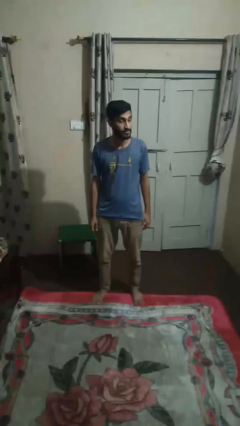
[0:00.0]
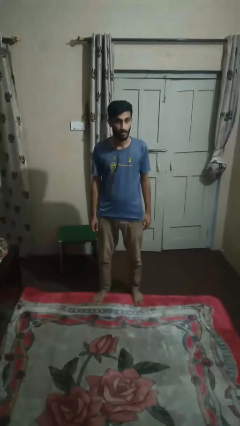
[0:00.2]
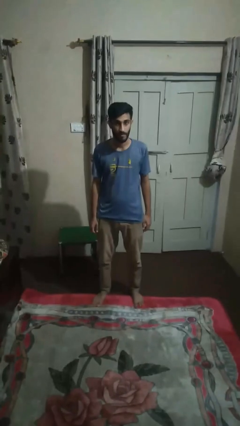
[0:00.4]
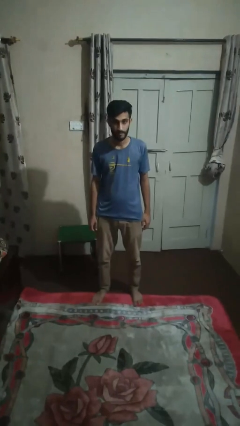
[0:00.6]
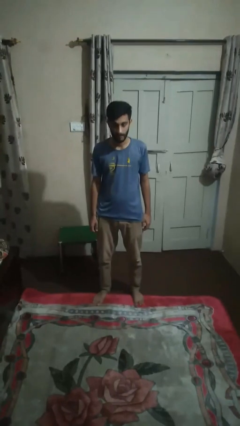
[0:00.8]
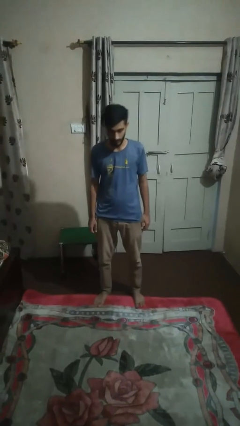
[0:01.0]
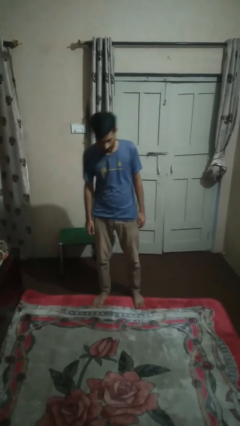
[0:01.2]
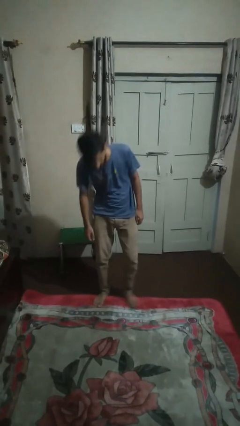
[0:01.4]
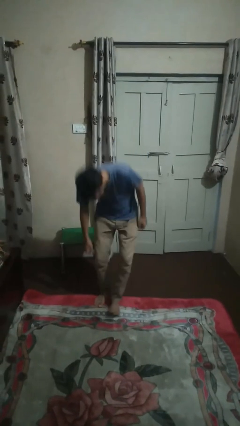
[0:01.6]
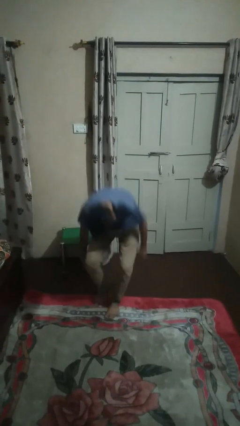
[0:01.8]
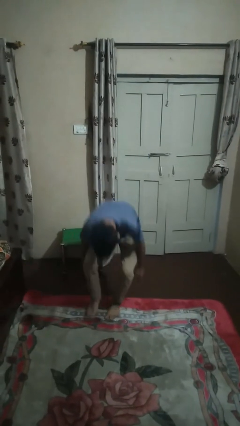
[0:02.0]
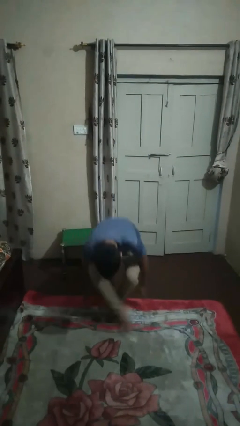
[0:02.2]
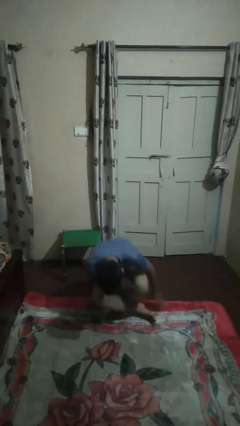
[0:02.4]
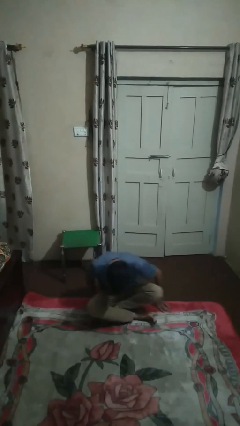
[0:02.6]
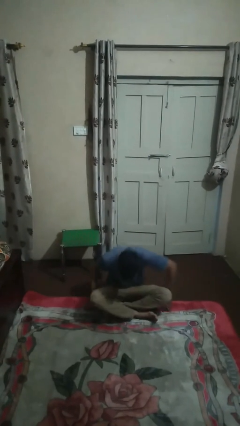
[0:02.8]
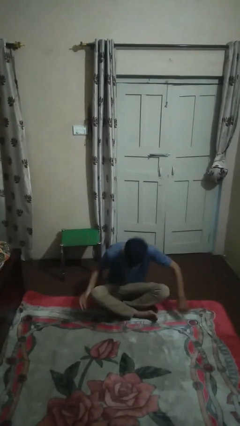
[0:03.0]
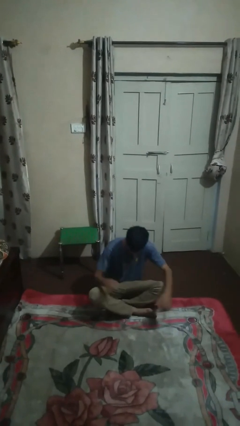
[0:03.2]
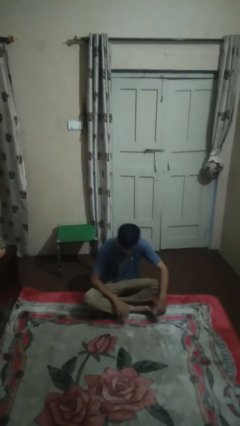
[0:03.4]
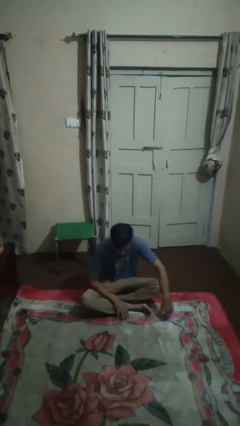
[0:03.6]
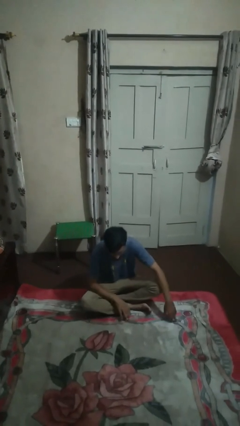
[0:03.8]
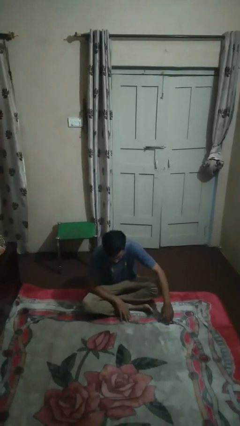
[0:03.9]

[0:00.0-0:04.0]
person sits crisscross

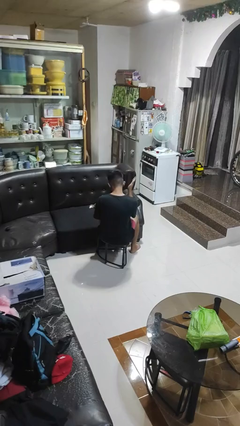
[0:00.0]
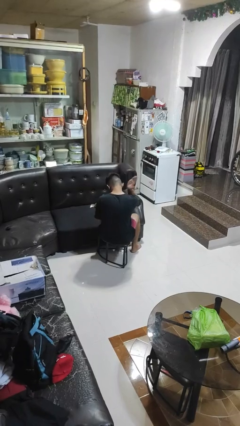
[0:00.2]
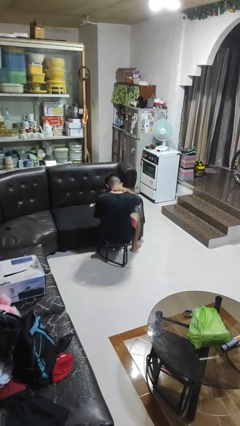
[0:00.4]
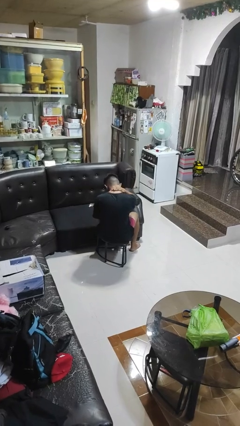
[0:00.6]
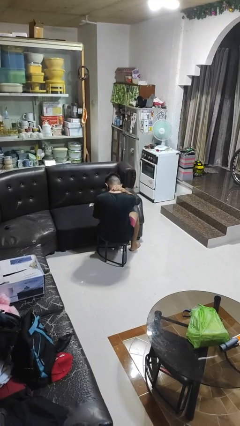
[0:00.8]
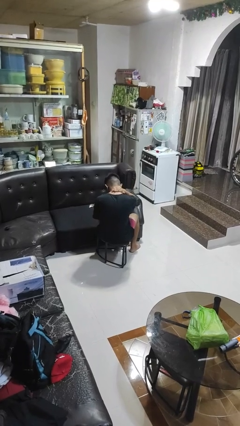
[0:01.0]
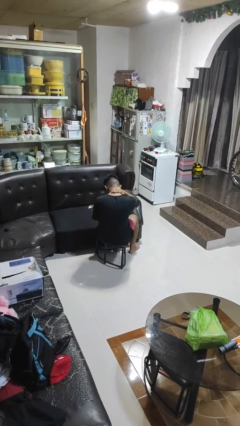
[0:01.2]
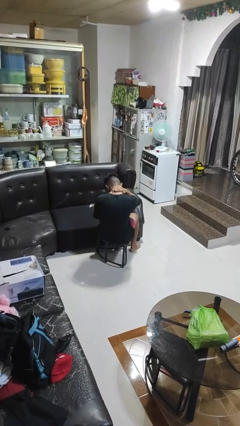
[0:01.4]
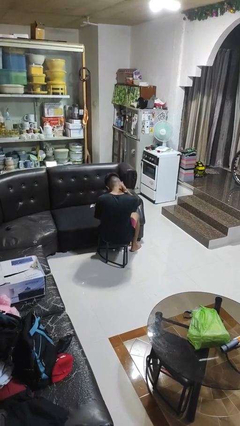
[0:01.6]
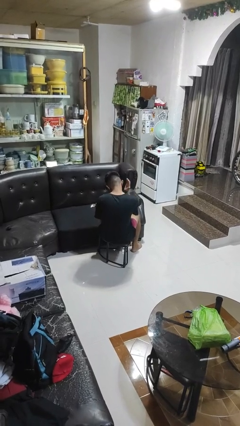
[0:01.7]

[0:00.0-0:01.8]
person swats bug

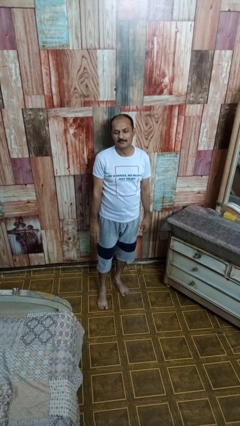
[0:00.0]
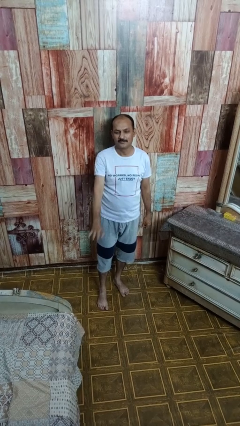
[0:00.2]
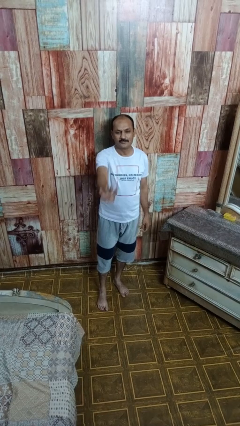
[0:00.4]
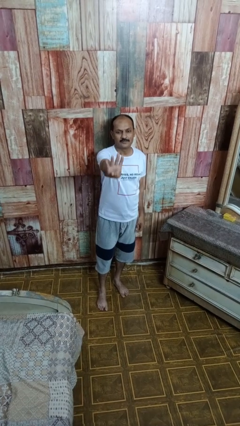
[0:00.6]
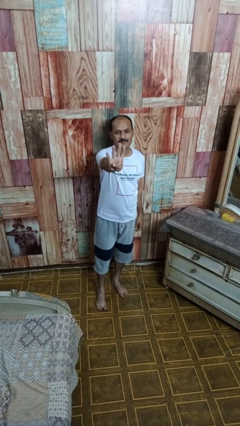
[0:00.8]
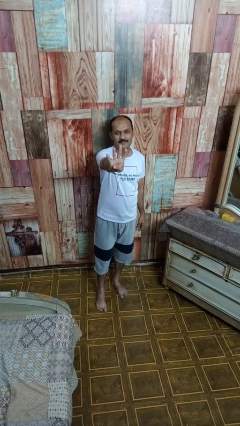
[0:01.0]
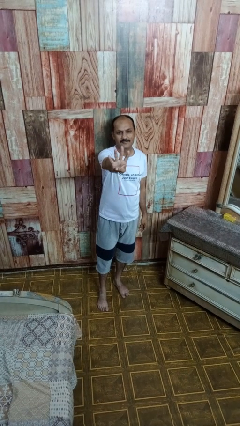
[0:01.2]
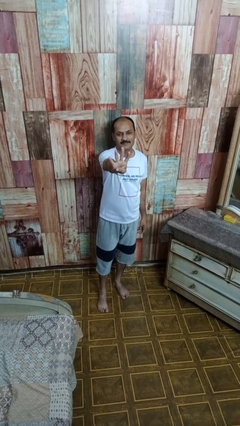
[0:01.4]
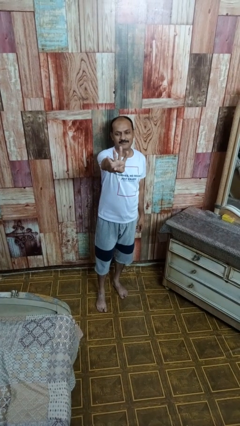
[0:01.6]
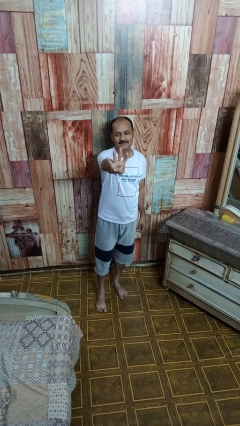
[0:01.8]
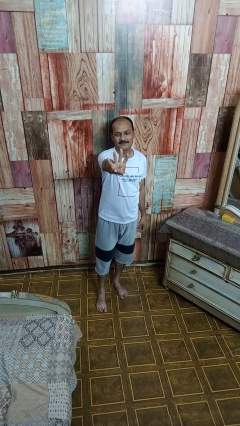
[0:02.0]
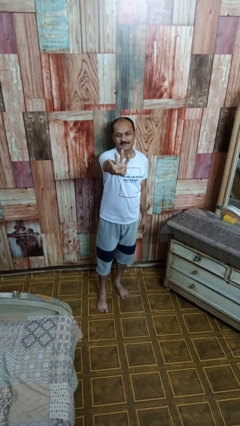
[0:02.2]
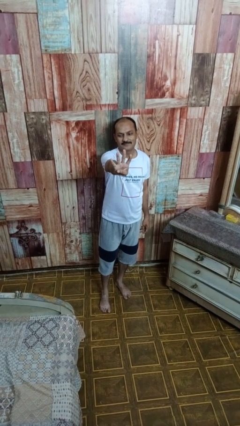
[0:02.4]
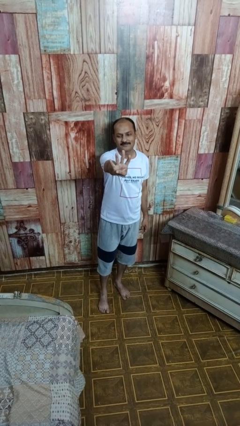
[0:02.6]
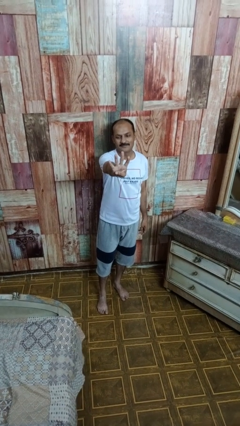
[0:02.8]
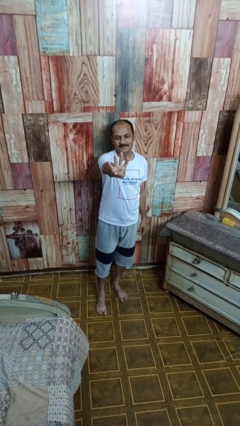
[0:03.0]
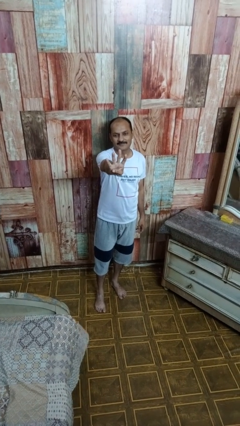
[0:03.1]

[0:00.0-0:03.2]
person gestures number four

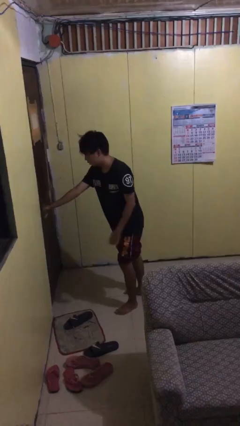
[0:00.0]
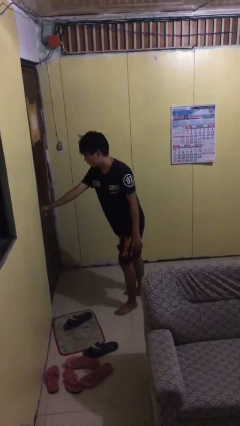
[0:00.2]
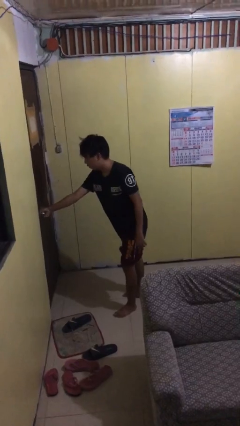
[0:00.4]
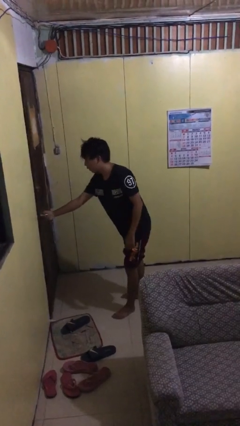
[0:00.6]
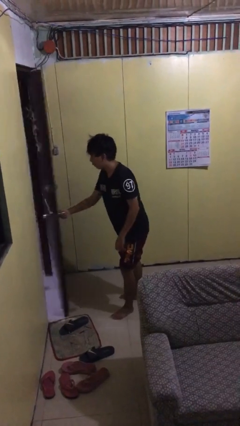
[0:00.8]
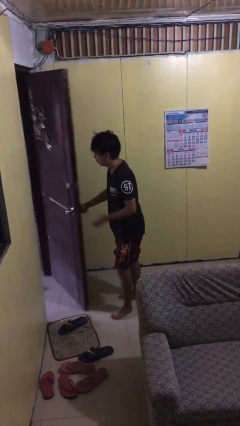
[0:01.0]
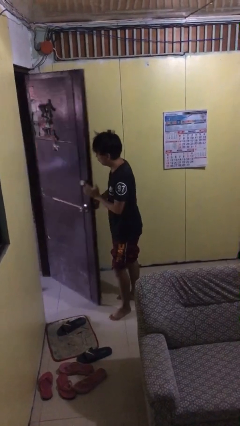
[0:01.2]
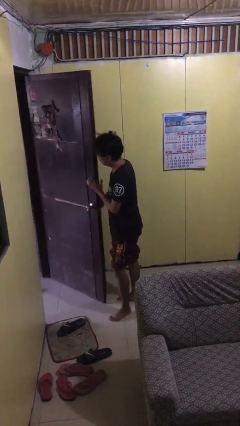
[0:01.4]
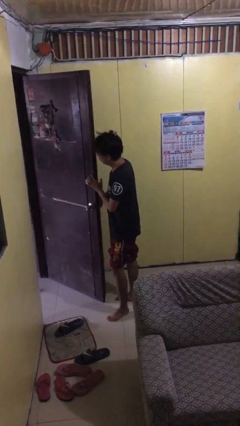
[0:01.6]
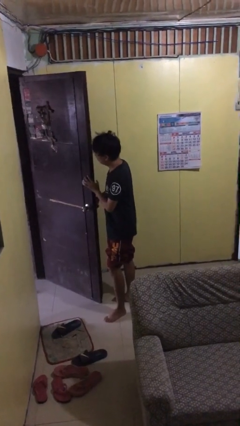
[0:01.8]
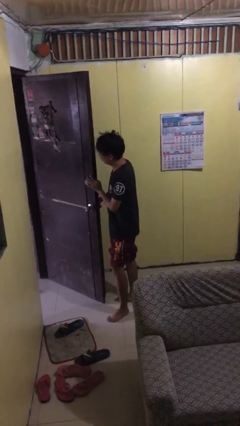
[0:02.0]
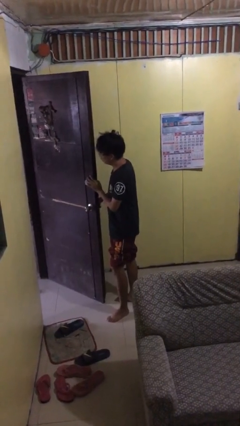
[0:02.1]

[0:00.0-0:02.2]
person opens facility door

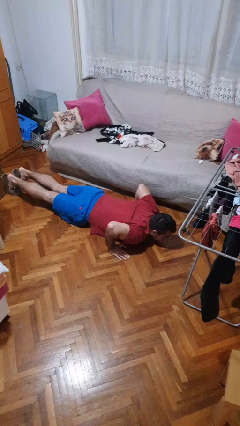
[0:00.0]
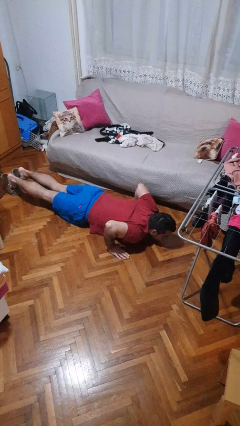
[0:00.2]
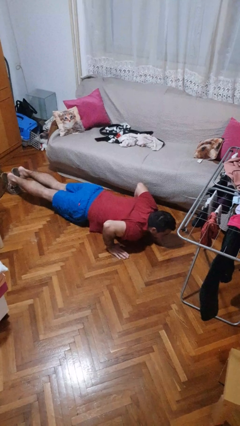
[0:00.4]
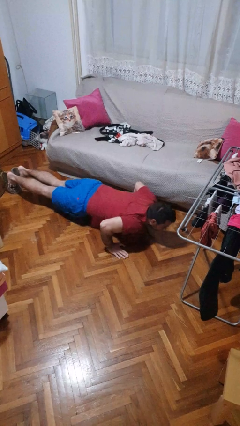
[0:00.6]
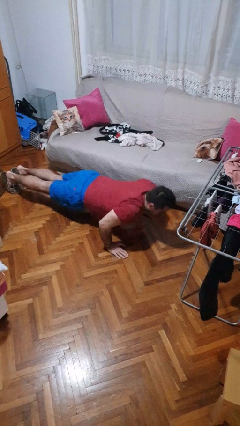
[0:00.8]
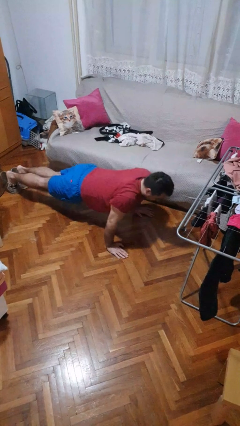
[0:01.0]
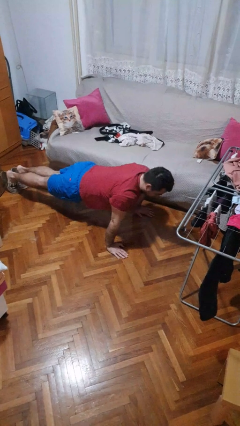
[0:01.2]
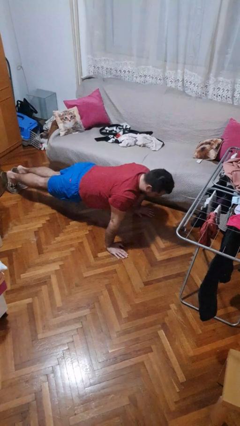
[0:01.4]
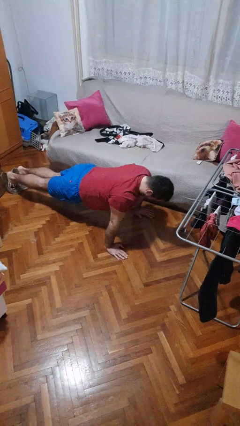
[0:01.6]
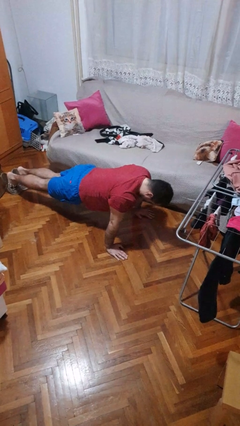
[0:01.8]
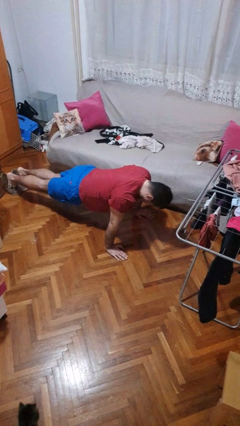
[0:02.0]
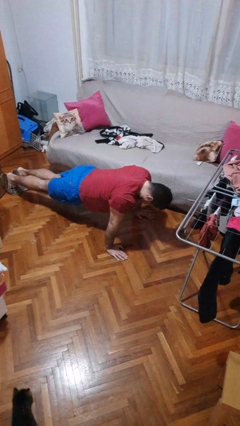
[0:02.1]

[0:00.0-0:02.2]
person exercises with pushup

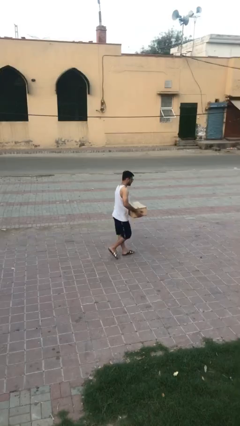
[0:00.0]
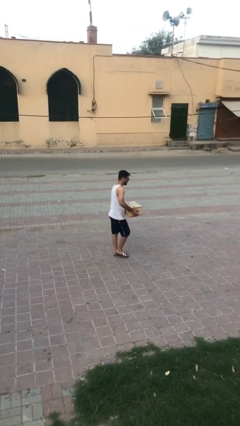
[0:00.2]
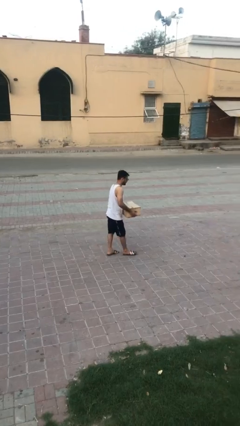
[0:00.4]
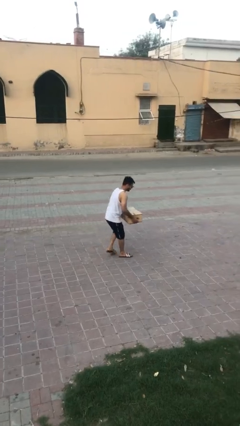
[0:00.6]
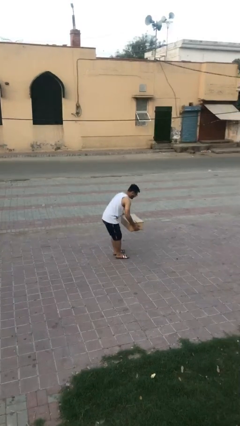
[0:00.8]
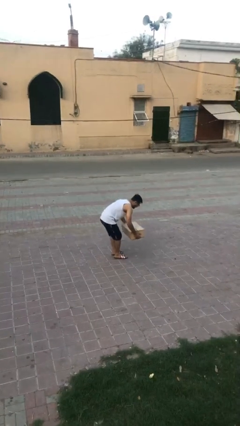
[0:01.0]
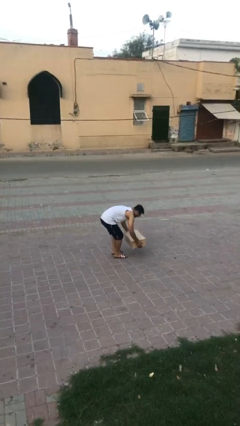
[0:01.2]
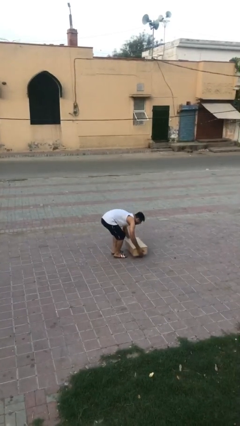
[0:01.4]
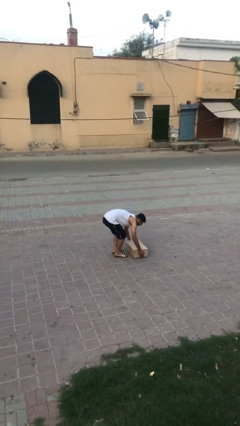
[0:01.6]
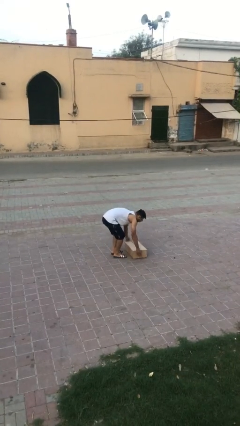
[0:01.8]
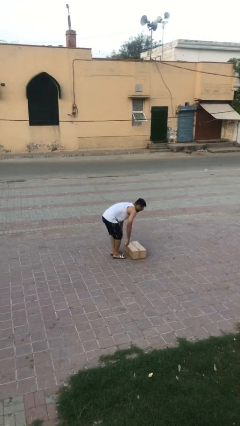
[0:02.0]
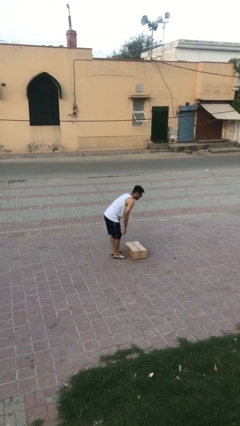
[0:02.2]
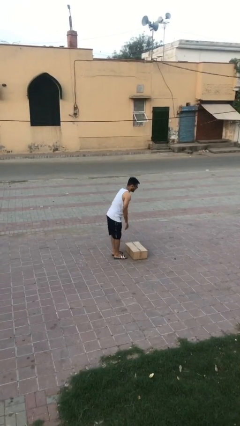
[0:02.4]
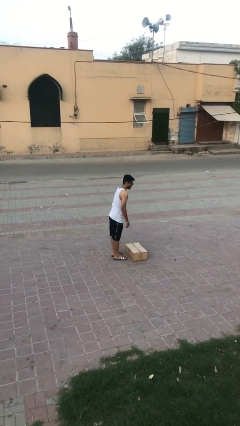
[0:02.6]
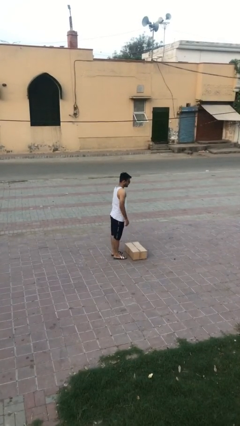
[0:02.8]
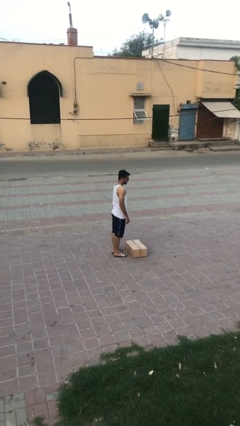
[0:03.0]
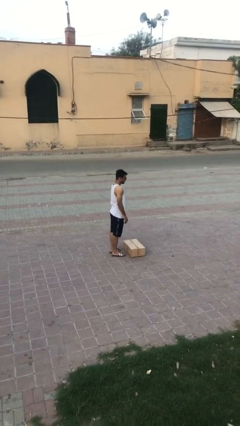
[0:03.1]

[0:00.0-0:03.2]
person puts down object on floor

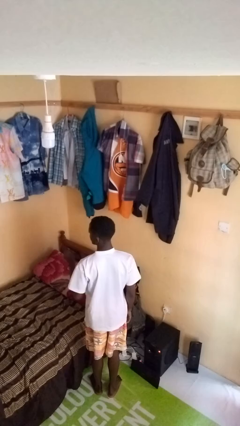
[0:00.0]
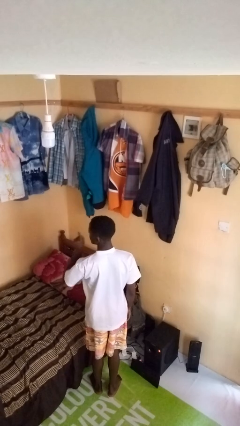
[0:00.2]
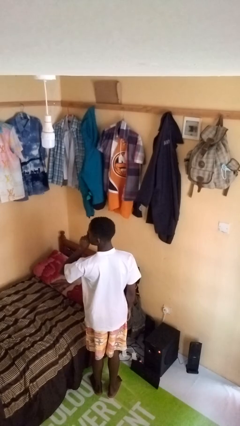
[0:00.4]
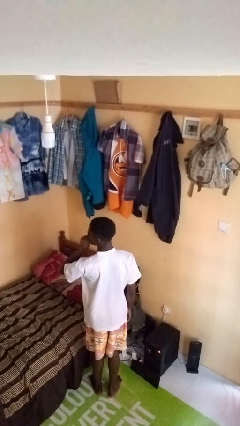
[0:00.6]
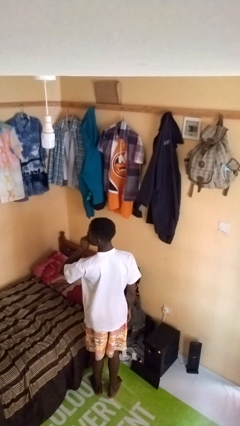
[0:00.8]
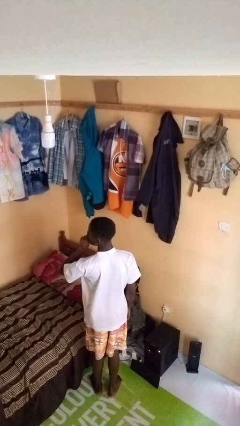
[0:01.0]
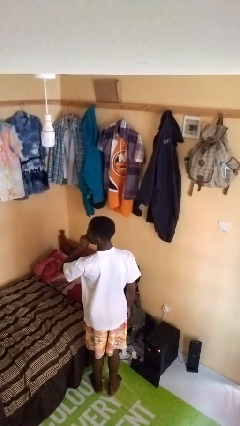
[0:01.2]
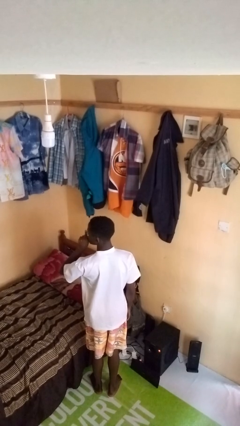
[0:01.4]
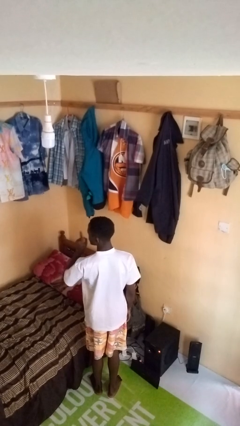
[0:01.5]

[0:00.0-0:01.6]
person gestures be quiet
